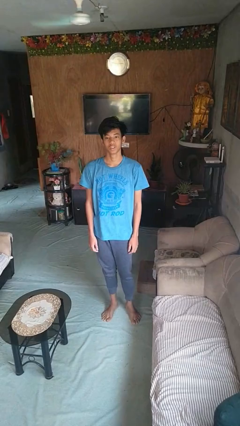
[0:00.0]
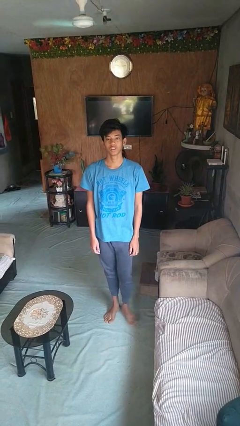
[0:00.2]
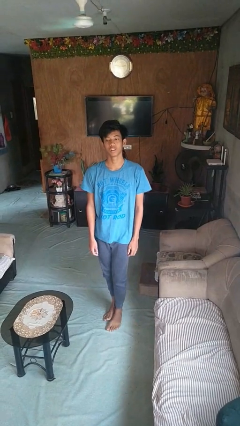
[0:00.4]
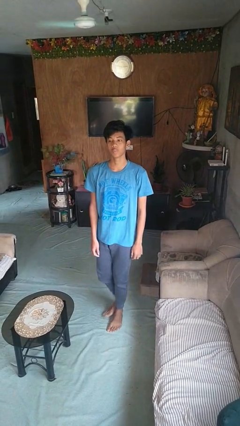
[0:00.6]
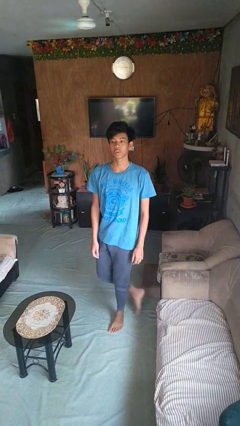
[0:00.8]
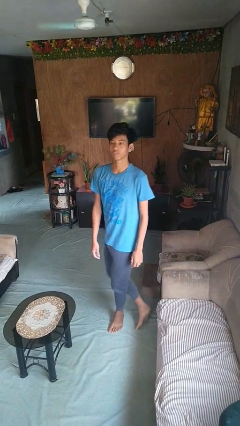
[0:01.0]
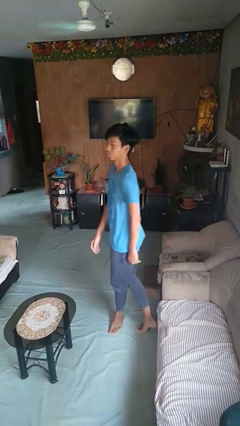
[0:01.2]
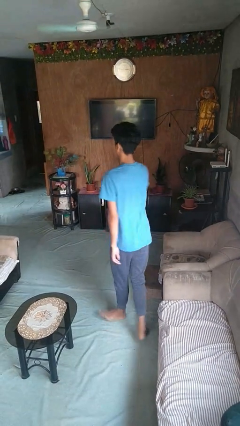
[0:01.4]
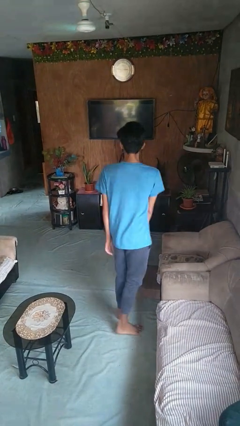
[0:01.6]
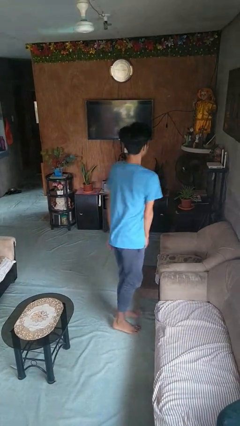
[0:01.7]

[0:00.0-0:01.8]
person twirls

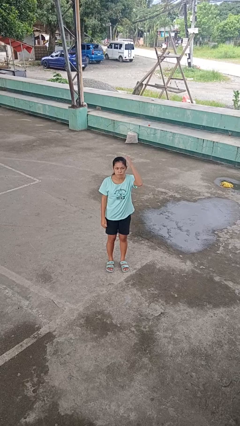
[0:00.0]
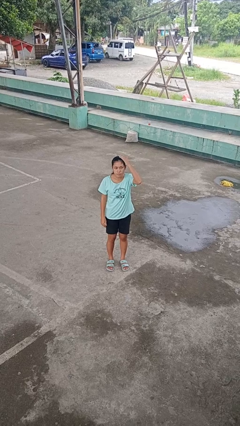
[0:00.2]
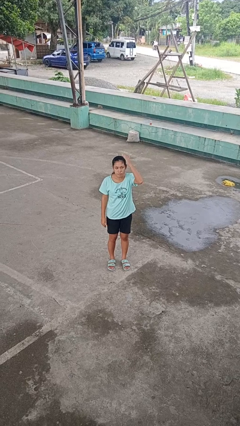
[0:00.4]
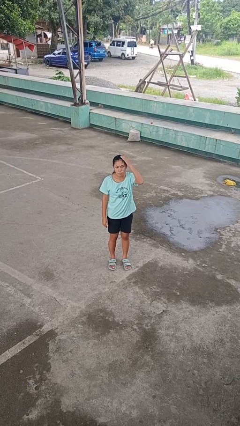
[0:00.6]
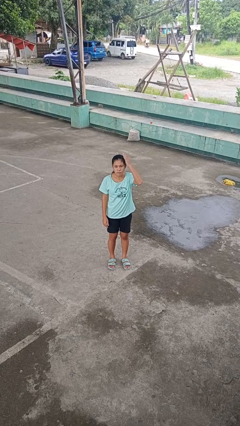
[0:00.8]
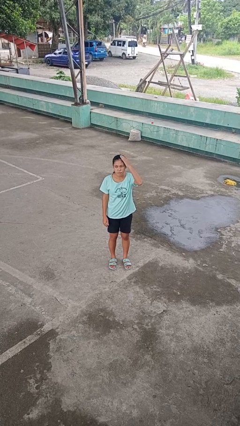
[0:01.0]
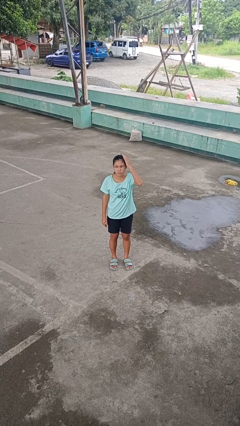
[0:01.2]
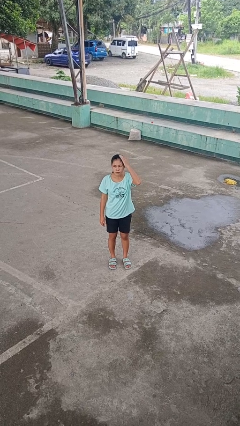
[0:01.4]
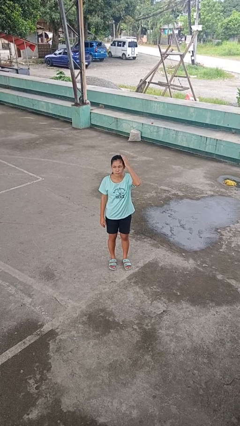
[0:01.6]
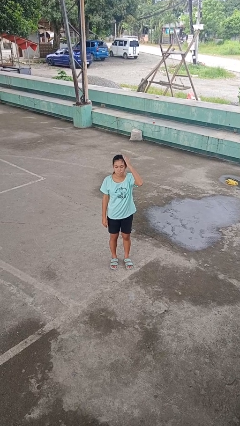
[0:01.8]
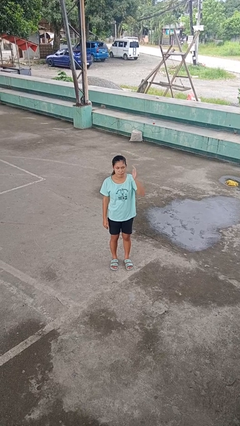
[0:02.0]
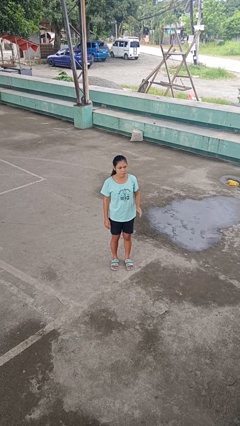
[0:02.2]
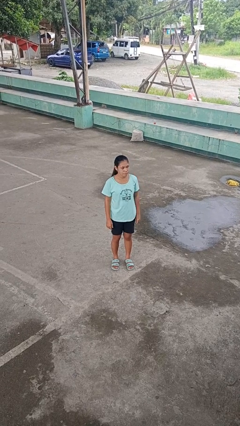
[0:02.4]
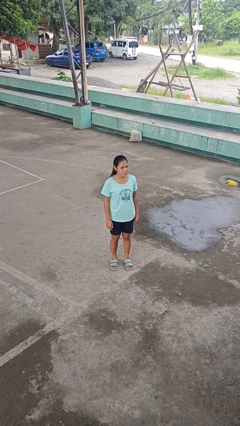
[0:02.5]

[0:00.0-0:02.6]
person pats head

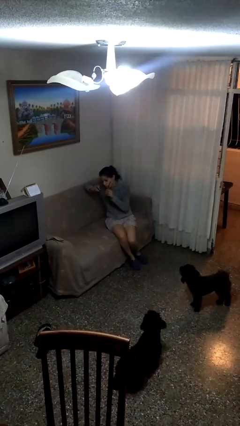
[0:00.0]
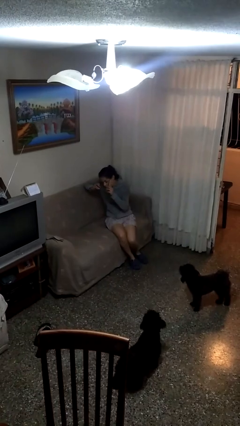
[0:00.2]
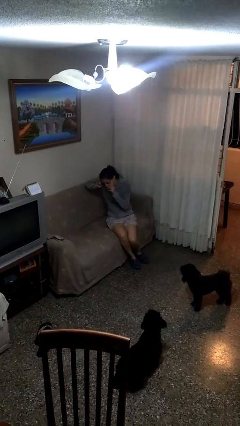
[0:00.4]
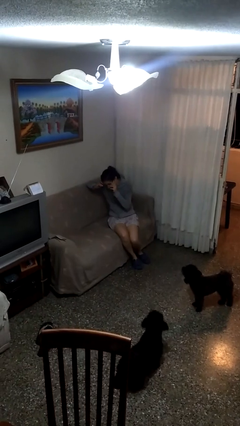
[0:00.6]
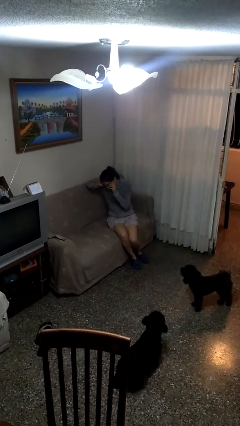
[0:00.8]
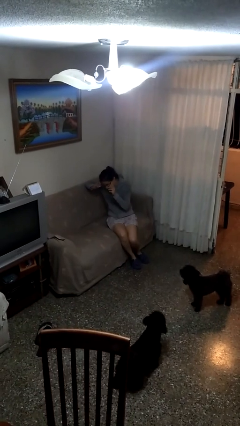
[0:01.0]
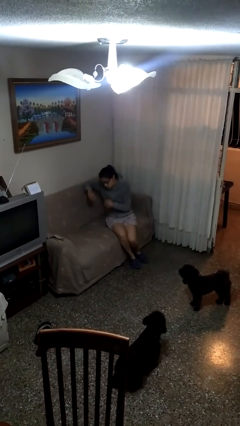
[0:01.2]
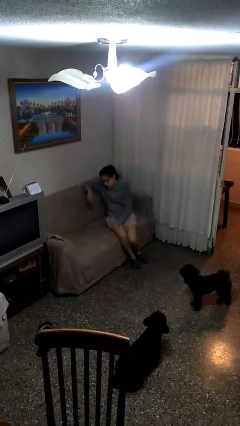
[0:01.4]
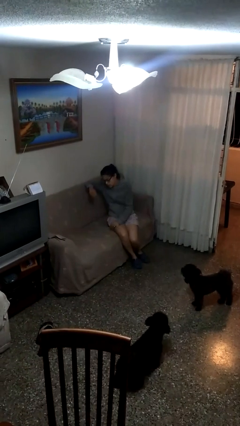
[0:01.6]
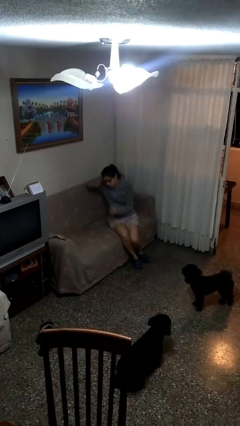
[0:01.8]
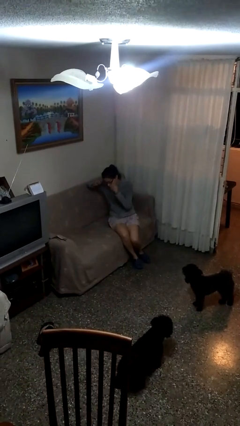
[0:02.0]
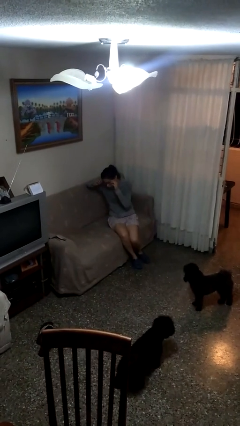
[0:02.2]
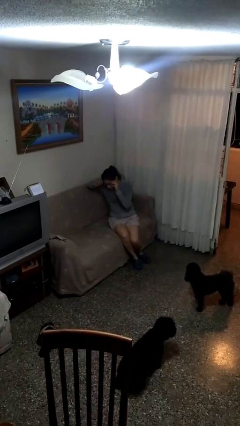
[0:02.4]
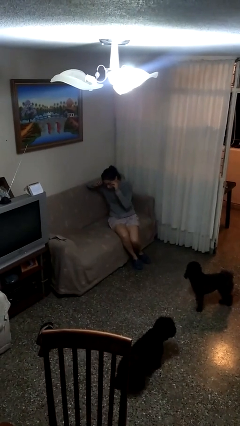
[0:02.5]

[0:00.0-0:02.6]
person puts on glasses

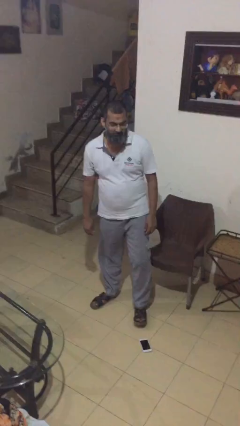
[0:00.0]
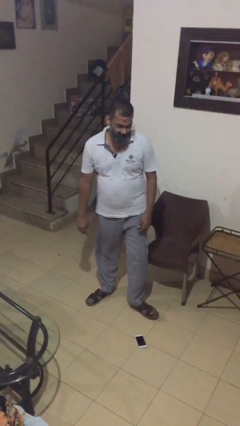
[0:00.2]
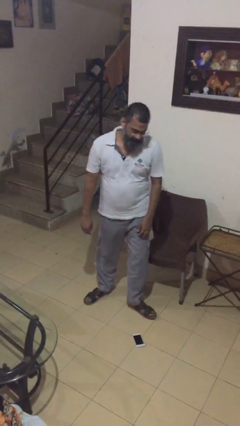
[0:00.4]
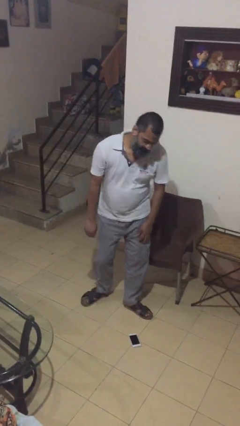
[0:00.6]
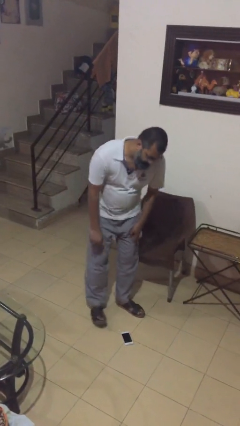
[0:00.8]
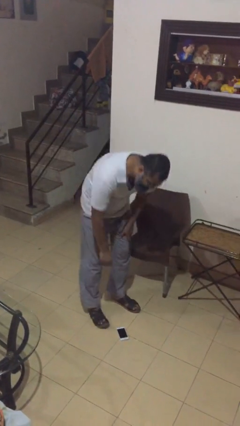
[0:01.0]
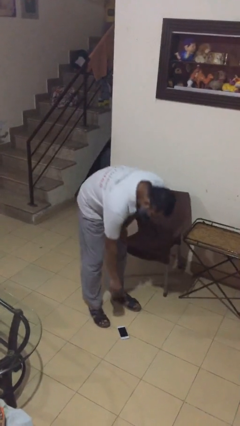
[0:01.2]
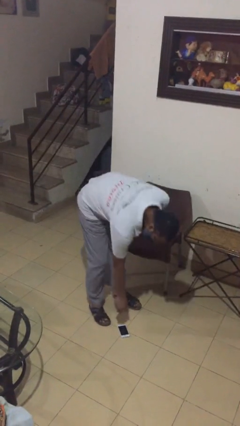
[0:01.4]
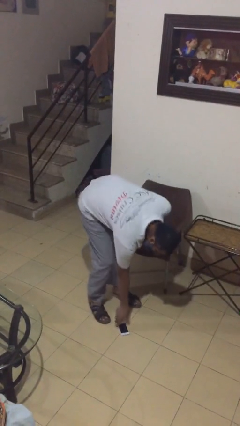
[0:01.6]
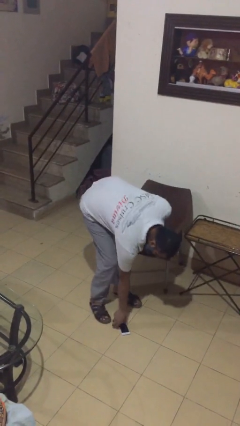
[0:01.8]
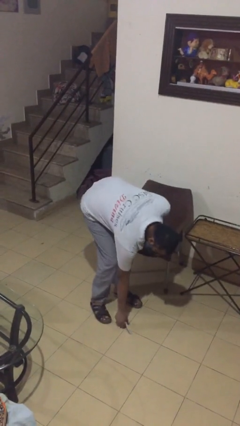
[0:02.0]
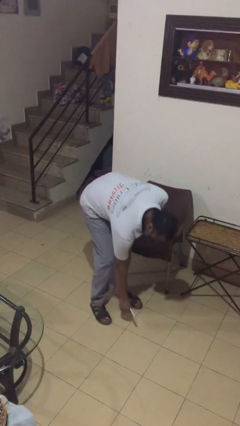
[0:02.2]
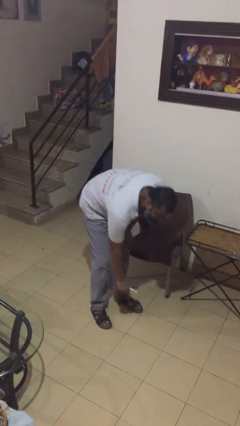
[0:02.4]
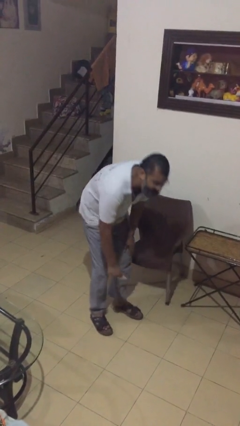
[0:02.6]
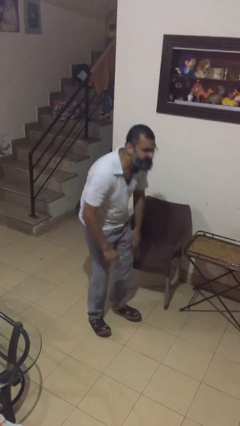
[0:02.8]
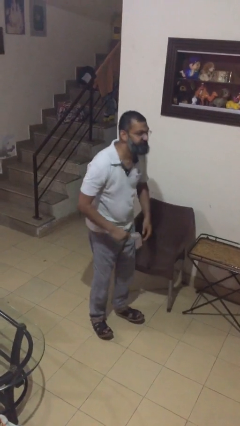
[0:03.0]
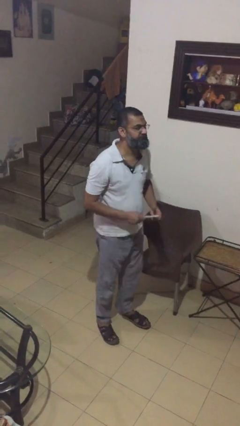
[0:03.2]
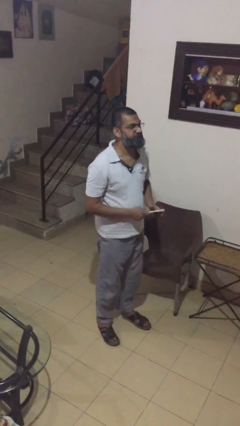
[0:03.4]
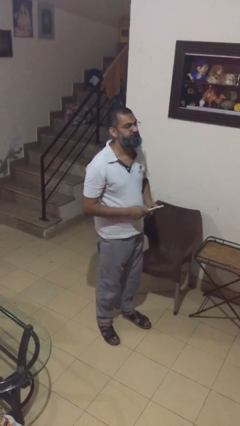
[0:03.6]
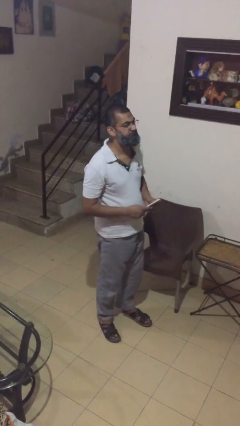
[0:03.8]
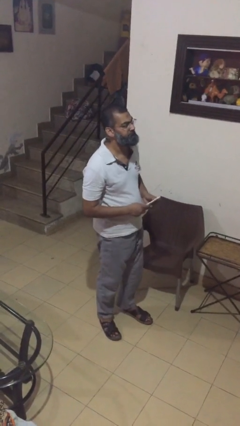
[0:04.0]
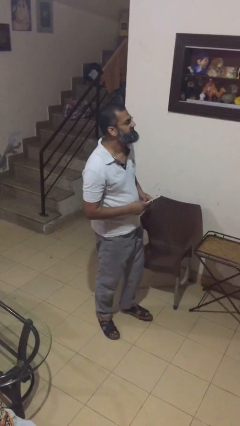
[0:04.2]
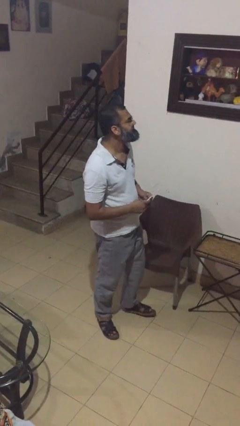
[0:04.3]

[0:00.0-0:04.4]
person picks up object from floor

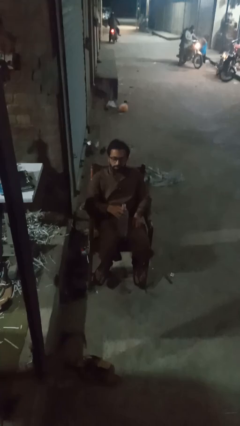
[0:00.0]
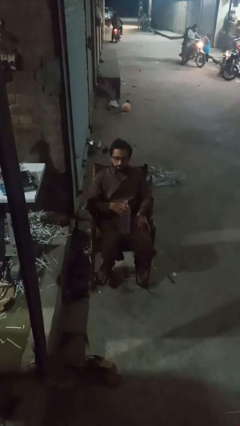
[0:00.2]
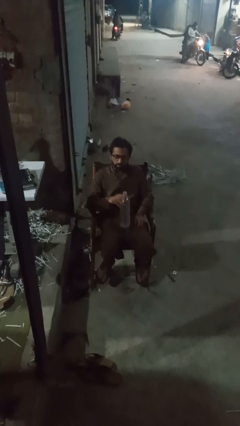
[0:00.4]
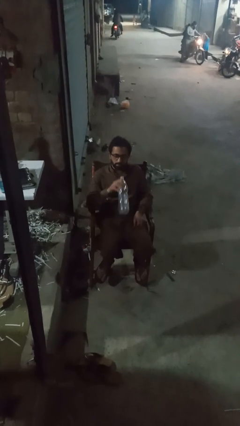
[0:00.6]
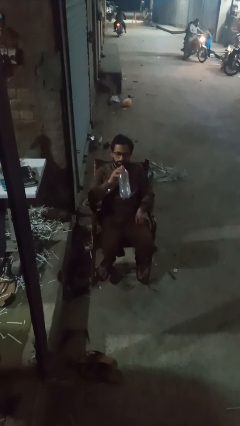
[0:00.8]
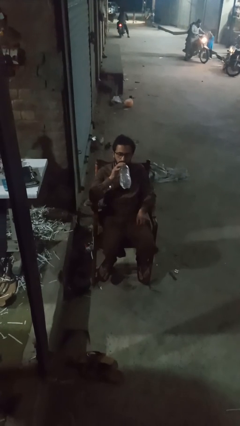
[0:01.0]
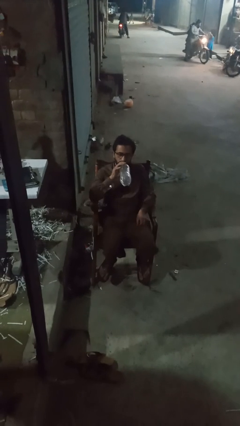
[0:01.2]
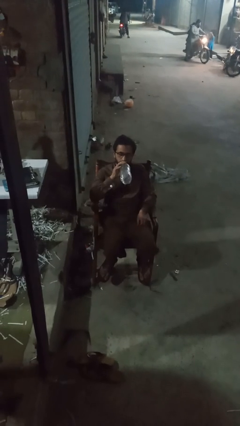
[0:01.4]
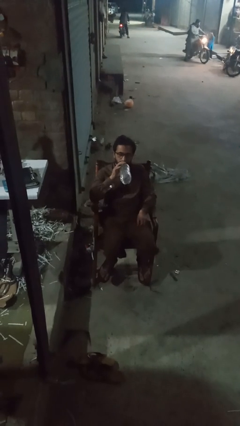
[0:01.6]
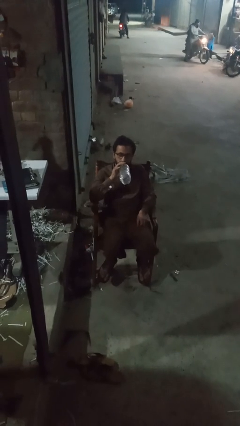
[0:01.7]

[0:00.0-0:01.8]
person drinks from bottle

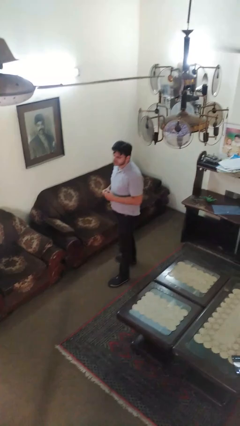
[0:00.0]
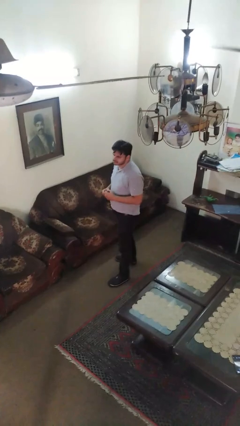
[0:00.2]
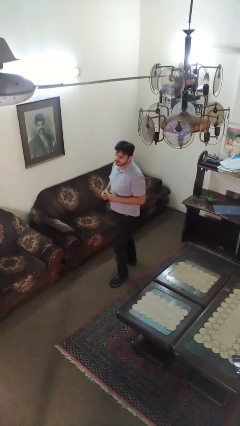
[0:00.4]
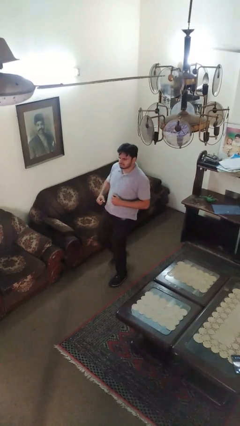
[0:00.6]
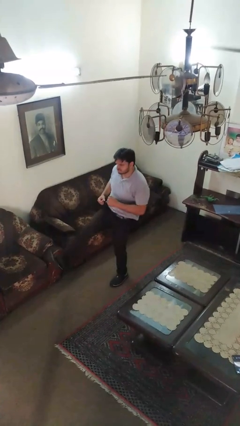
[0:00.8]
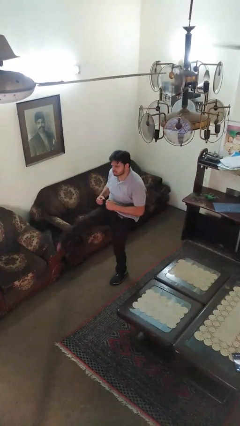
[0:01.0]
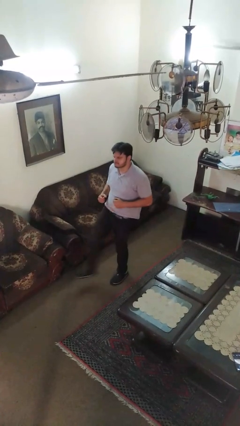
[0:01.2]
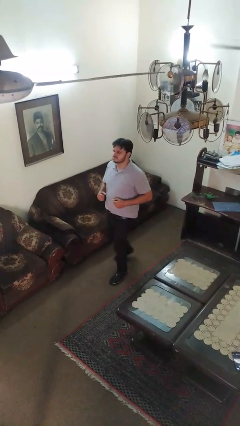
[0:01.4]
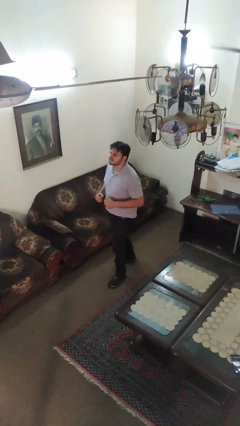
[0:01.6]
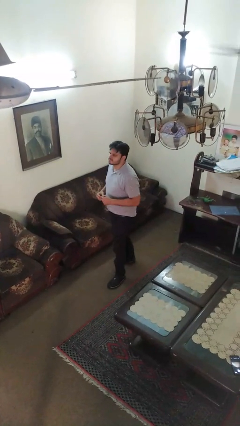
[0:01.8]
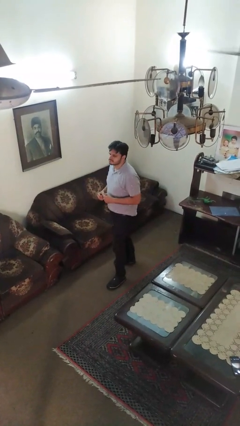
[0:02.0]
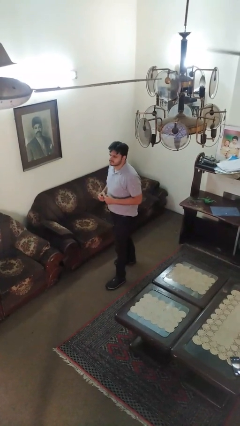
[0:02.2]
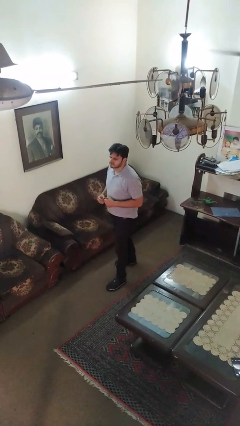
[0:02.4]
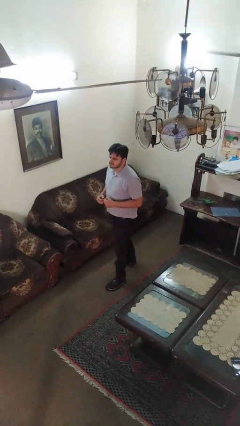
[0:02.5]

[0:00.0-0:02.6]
person karate kicks

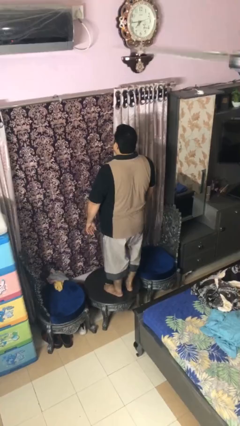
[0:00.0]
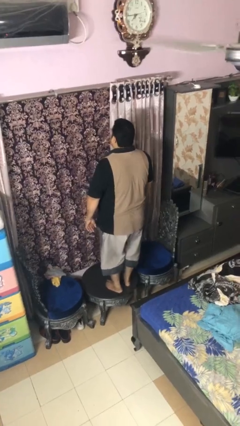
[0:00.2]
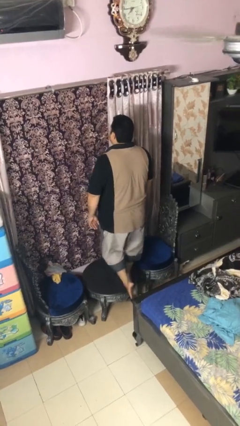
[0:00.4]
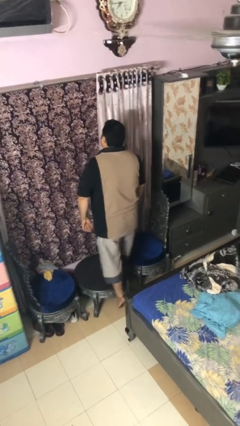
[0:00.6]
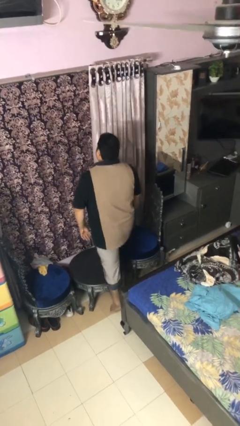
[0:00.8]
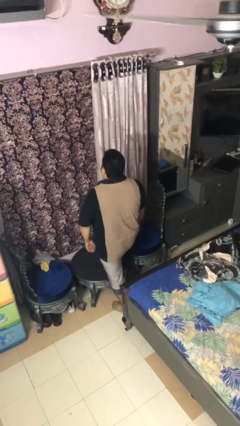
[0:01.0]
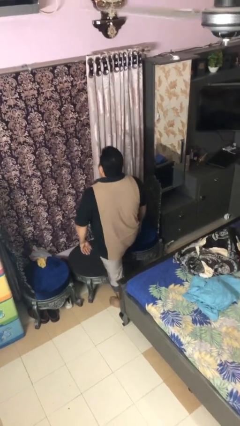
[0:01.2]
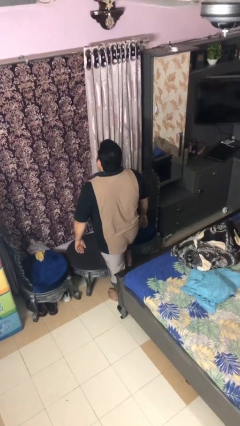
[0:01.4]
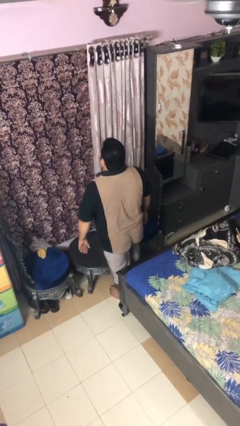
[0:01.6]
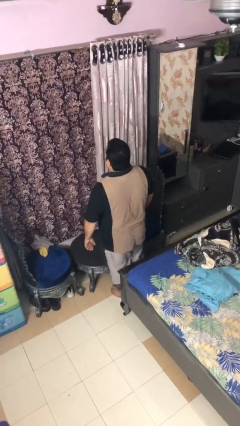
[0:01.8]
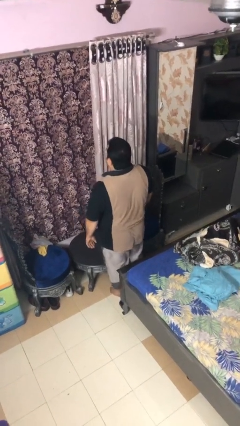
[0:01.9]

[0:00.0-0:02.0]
person climbs off table
